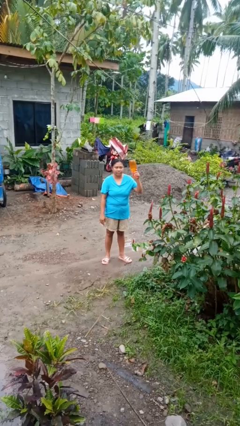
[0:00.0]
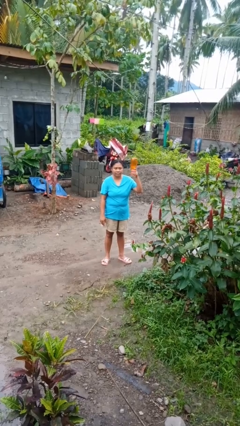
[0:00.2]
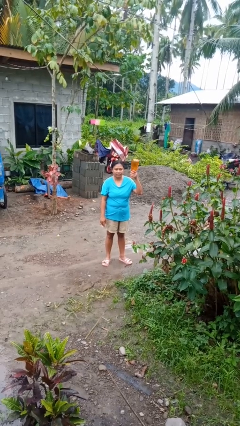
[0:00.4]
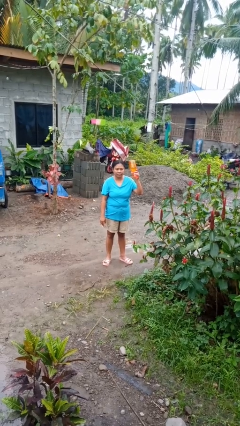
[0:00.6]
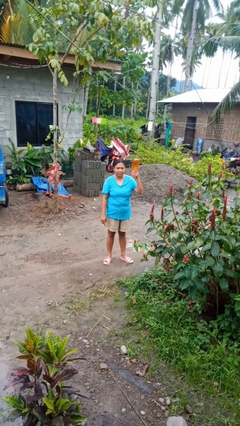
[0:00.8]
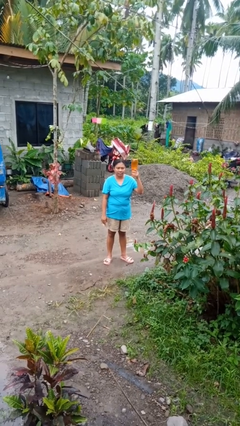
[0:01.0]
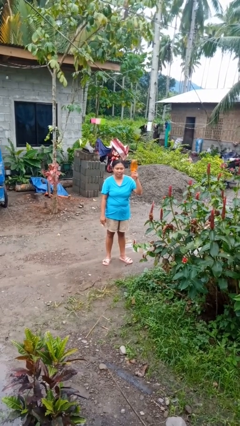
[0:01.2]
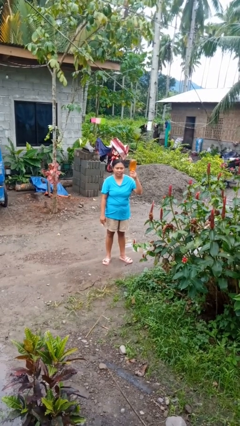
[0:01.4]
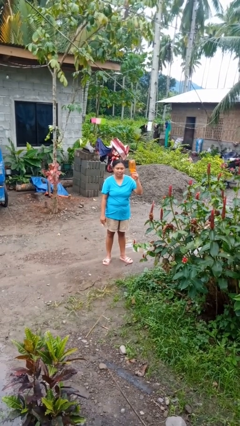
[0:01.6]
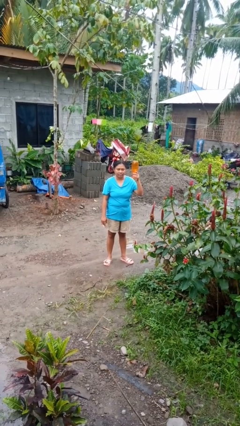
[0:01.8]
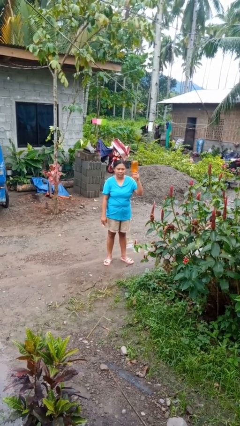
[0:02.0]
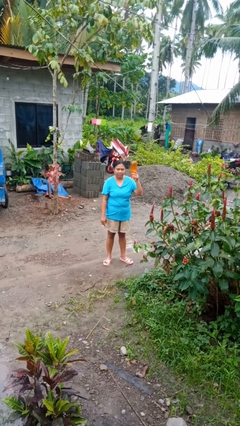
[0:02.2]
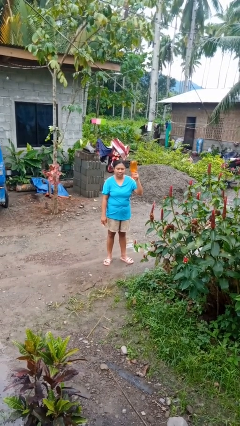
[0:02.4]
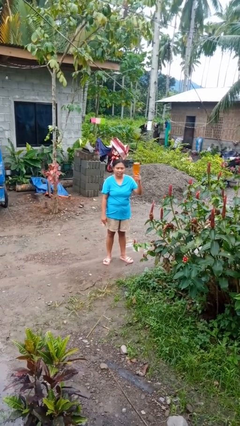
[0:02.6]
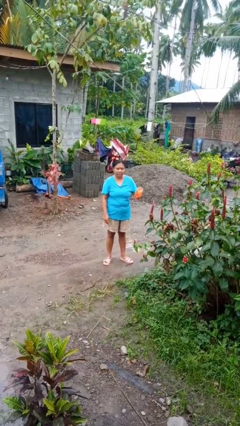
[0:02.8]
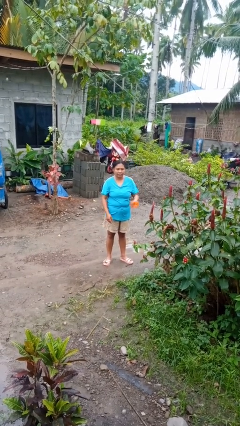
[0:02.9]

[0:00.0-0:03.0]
person holds object above head

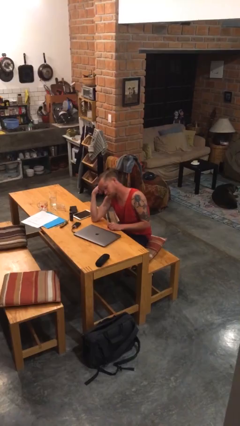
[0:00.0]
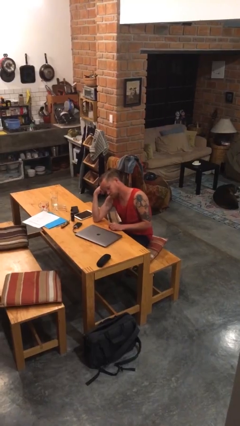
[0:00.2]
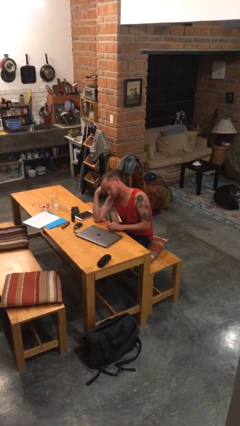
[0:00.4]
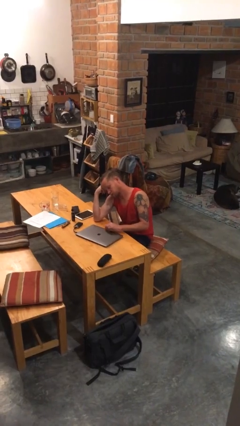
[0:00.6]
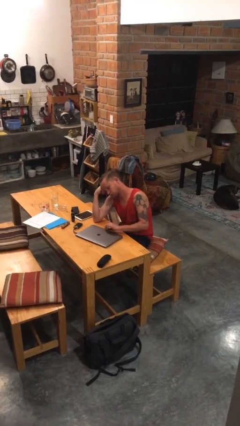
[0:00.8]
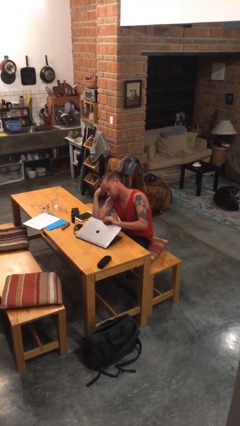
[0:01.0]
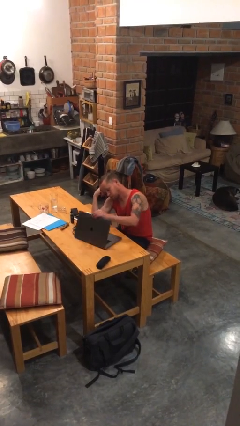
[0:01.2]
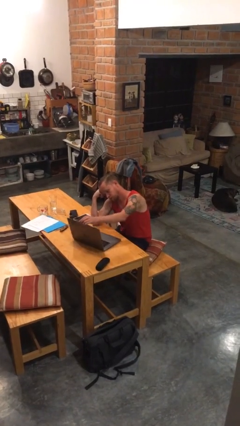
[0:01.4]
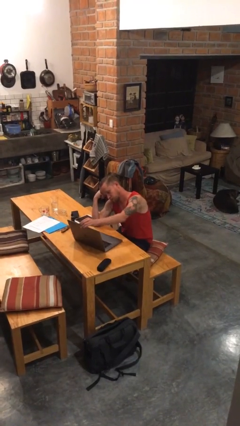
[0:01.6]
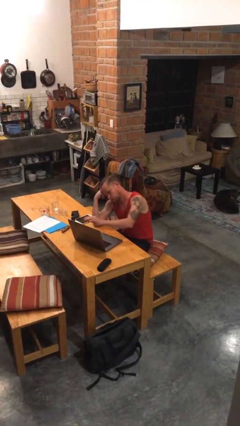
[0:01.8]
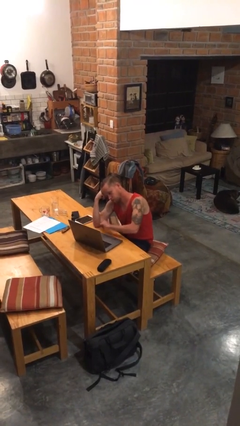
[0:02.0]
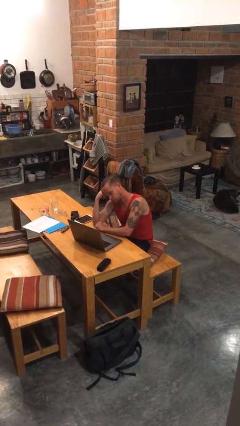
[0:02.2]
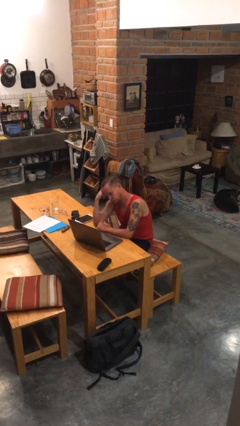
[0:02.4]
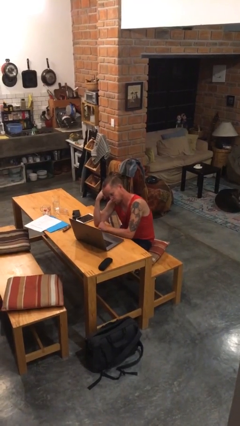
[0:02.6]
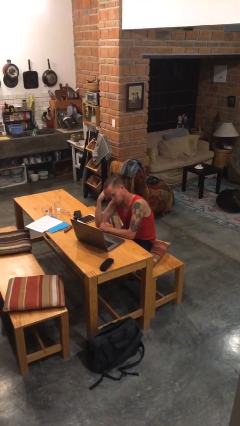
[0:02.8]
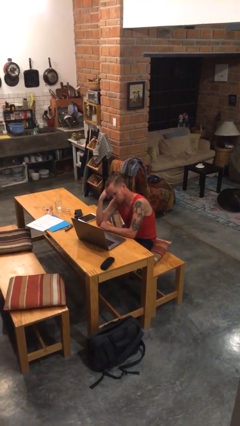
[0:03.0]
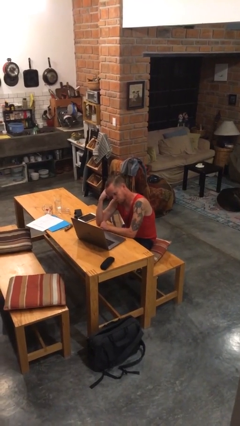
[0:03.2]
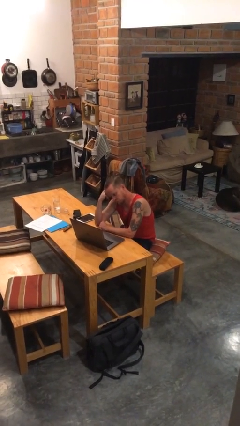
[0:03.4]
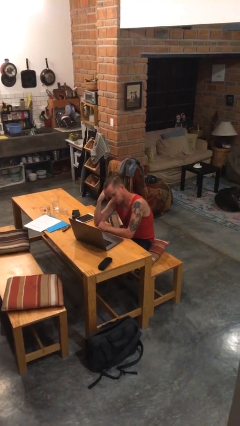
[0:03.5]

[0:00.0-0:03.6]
person opens laptop

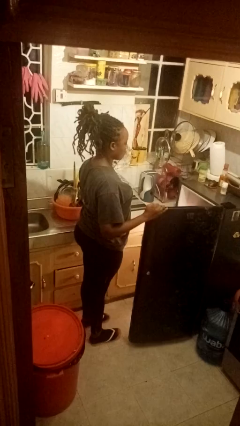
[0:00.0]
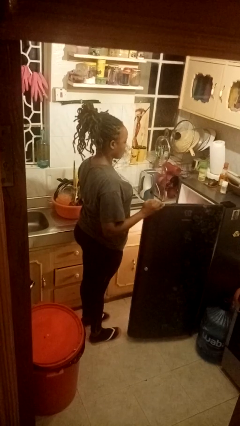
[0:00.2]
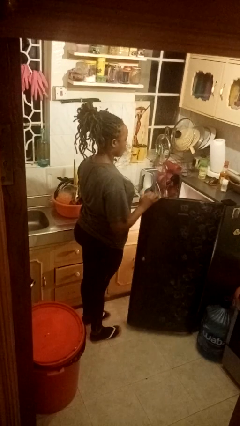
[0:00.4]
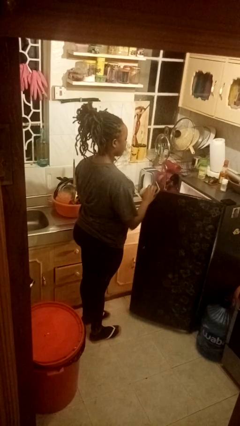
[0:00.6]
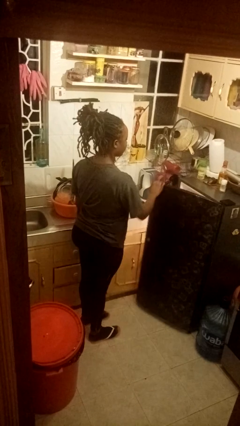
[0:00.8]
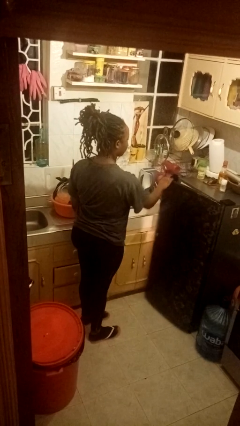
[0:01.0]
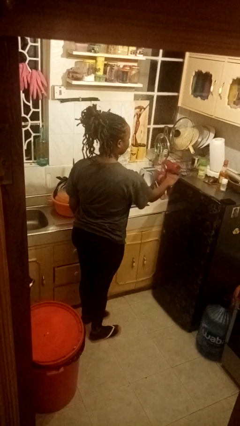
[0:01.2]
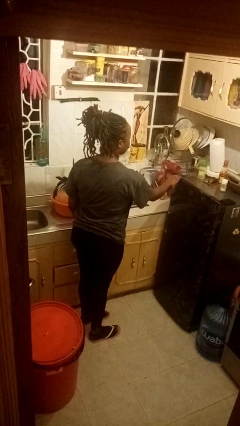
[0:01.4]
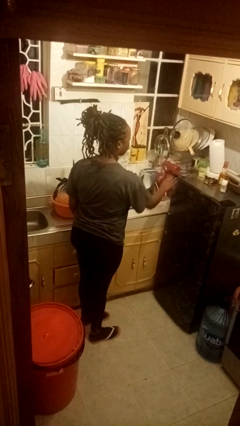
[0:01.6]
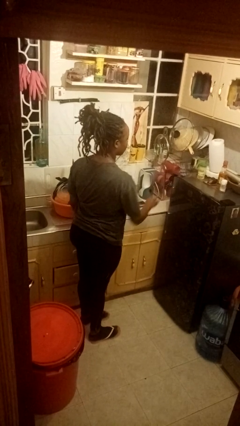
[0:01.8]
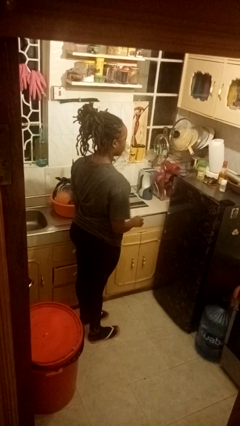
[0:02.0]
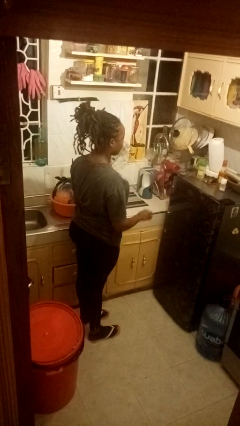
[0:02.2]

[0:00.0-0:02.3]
person closes refrigerator

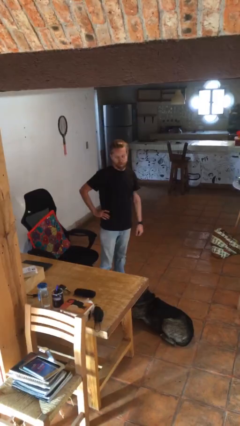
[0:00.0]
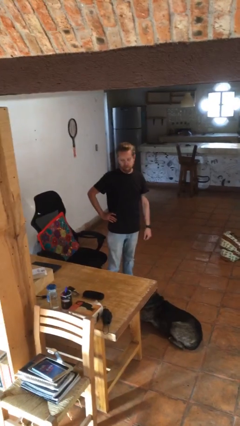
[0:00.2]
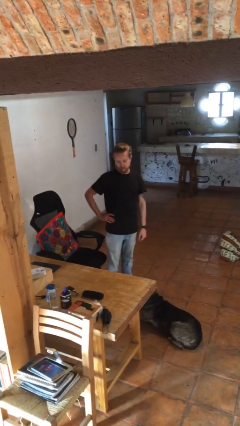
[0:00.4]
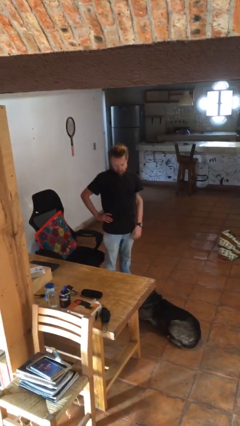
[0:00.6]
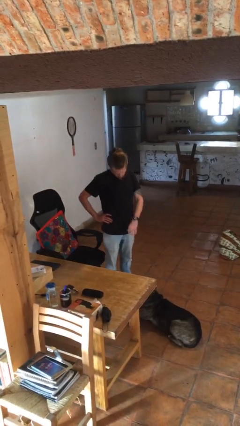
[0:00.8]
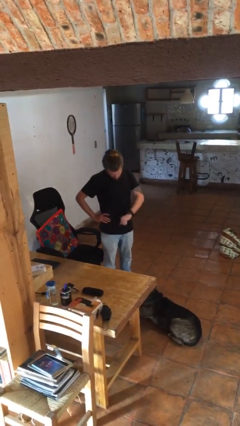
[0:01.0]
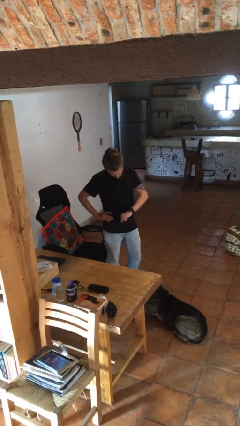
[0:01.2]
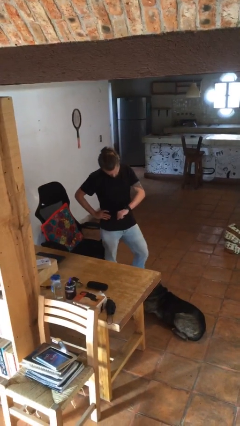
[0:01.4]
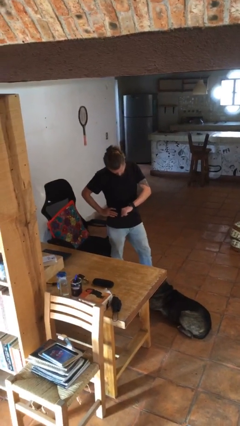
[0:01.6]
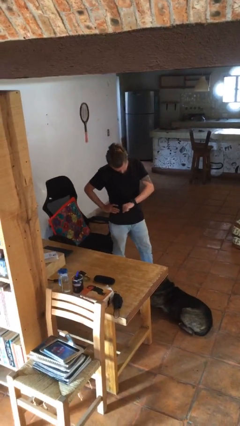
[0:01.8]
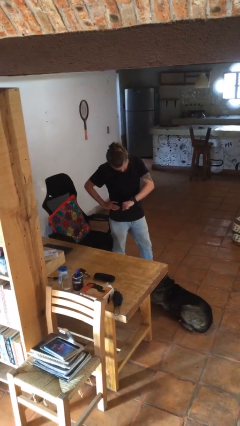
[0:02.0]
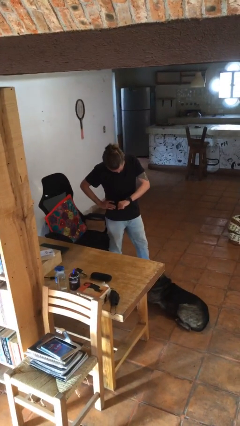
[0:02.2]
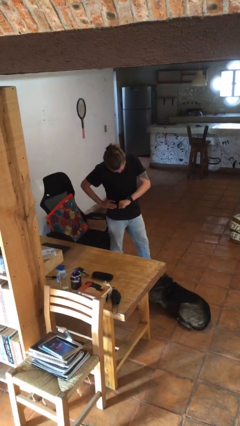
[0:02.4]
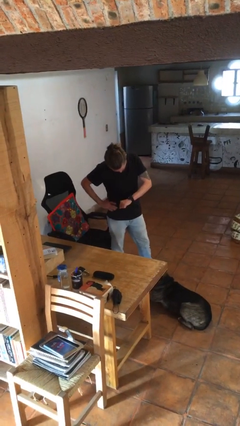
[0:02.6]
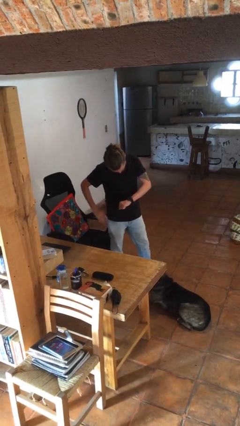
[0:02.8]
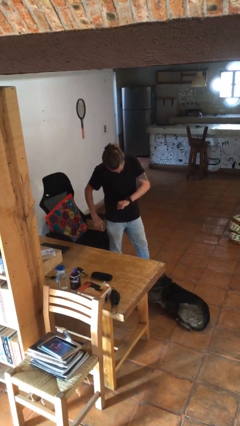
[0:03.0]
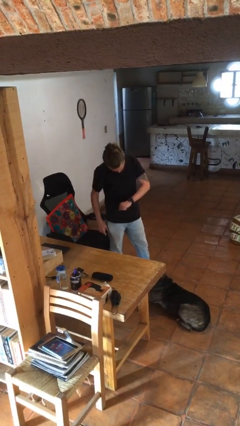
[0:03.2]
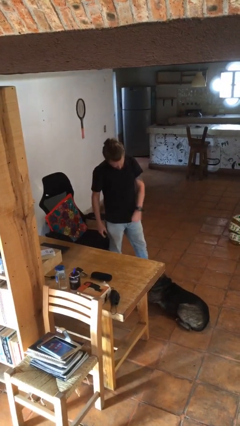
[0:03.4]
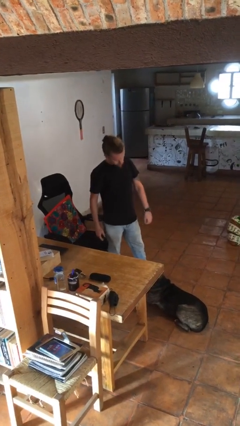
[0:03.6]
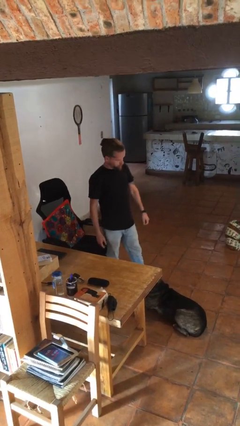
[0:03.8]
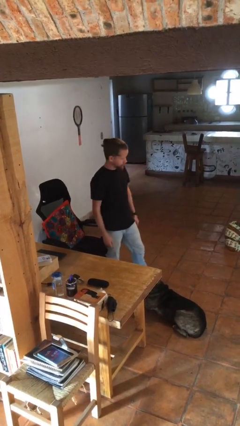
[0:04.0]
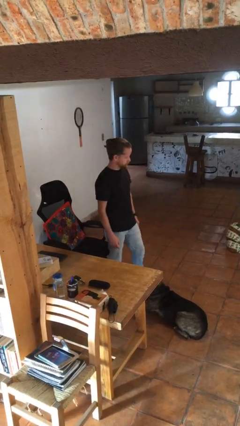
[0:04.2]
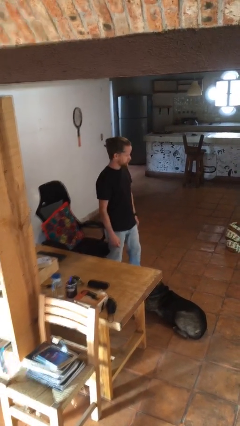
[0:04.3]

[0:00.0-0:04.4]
person looks at wristwatch

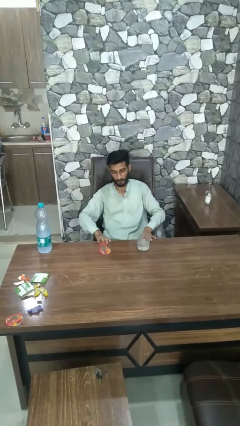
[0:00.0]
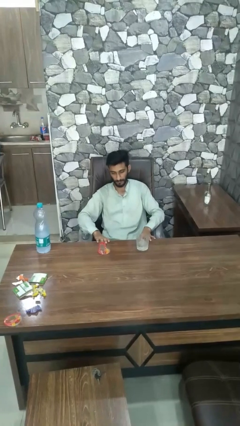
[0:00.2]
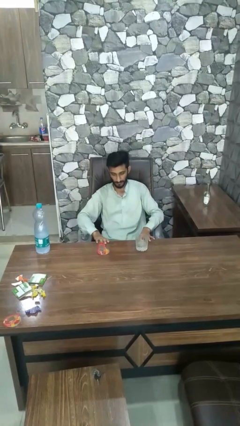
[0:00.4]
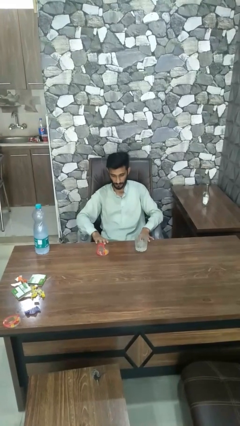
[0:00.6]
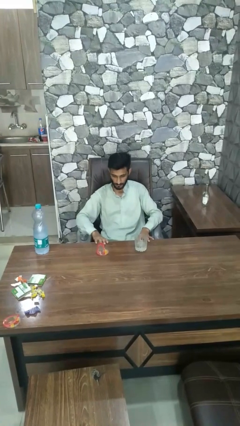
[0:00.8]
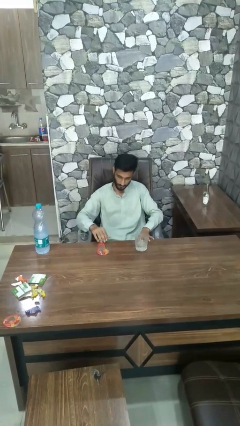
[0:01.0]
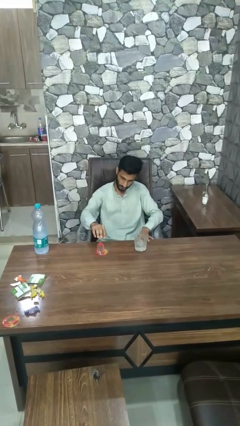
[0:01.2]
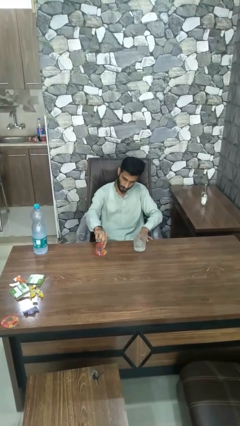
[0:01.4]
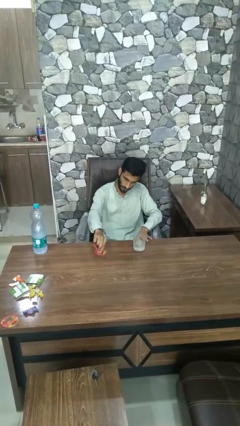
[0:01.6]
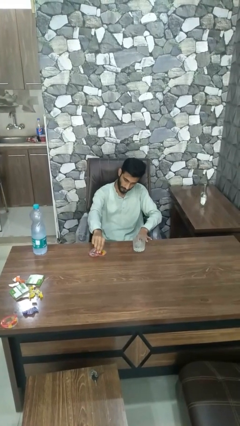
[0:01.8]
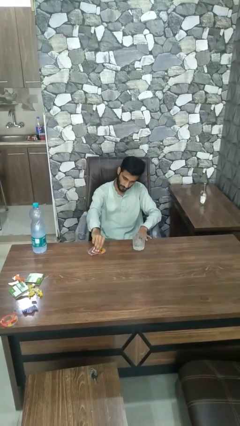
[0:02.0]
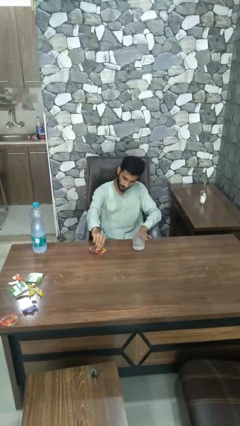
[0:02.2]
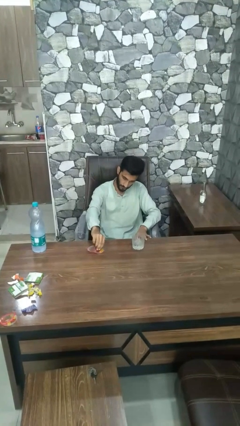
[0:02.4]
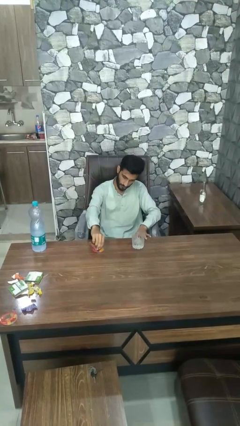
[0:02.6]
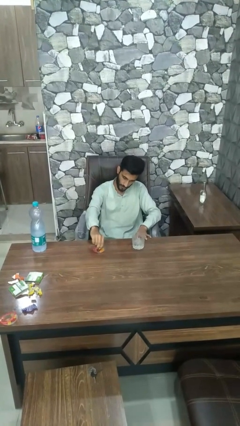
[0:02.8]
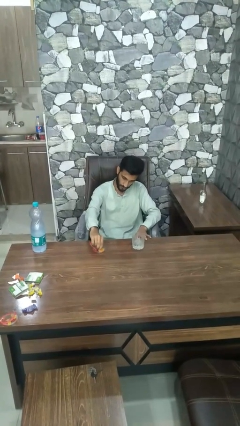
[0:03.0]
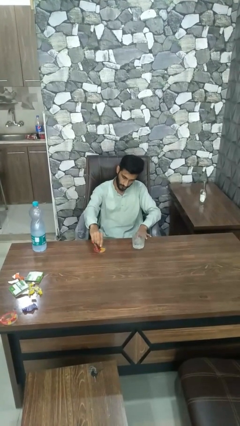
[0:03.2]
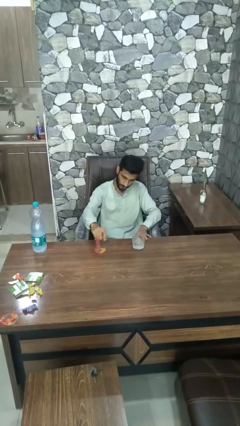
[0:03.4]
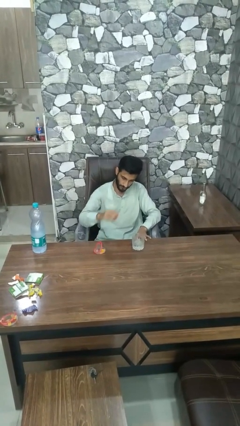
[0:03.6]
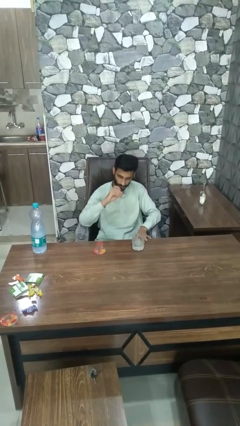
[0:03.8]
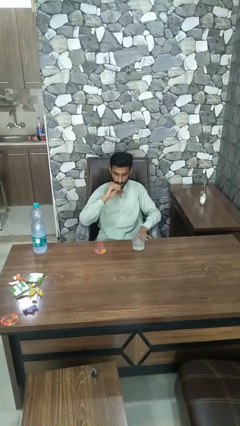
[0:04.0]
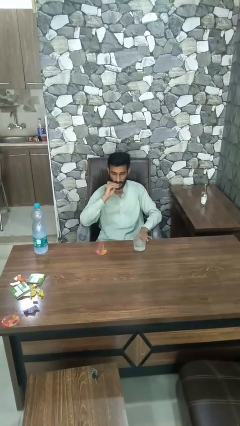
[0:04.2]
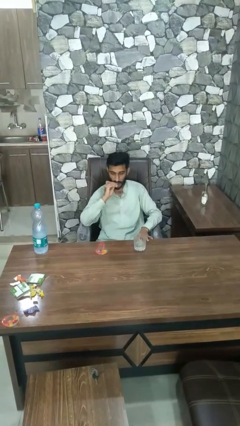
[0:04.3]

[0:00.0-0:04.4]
person takes medicine pills

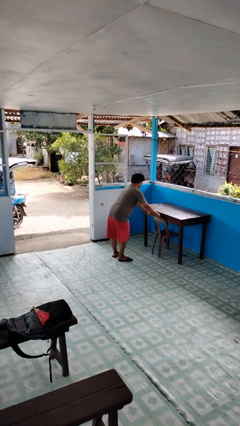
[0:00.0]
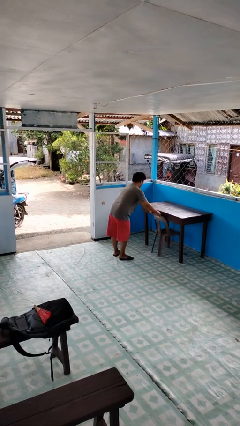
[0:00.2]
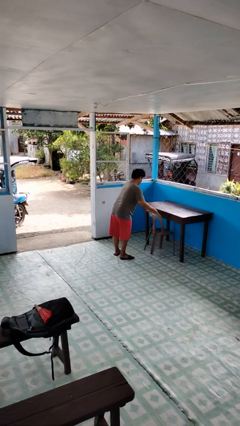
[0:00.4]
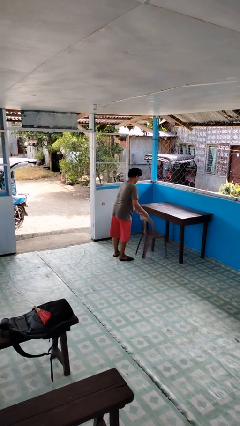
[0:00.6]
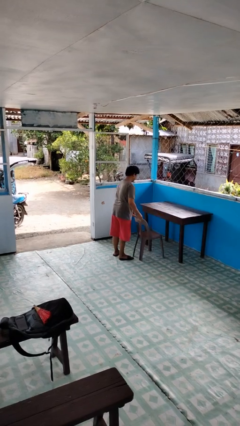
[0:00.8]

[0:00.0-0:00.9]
person pulls out chair
